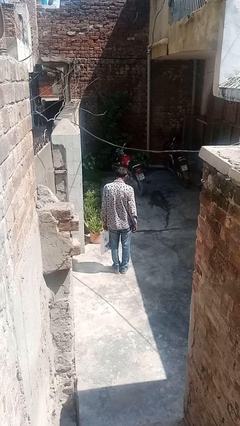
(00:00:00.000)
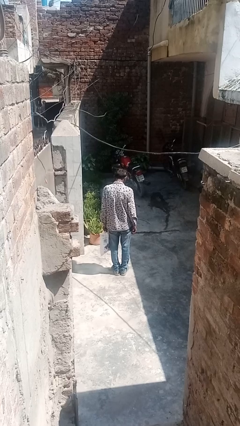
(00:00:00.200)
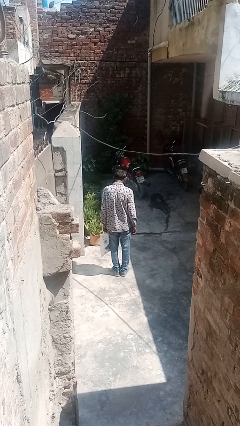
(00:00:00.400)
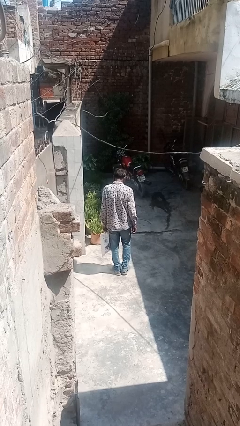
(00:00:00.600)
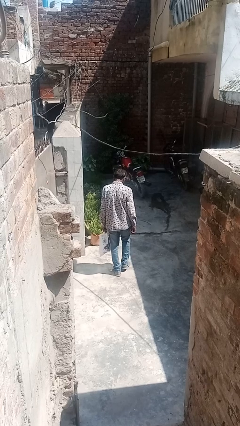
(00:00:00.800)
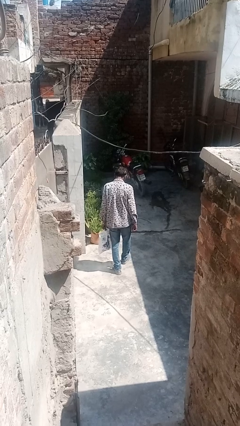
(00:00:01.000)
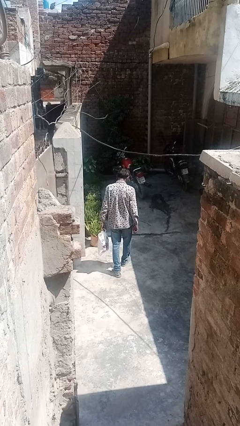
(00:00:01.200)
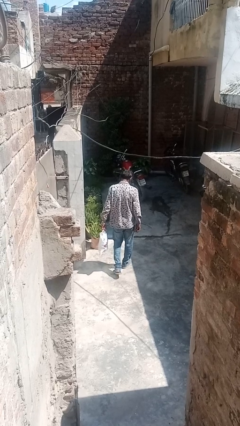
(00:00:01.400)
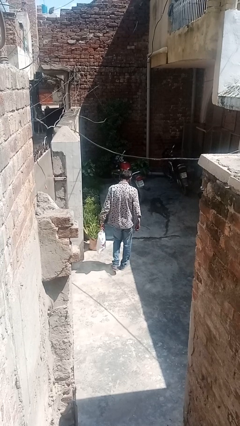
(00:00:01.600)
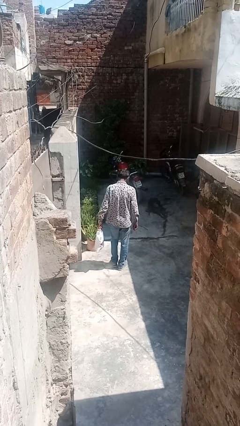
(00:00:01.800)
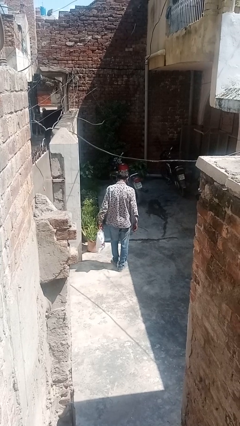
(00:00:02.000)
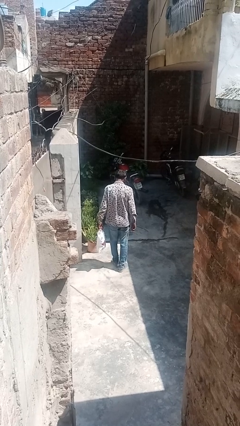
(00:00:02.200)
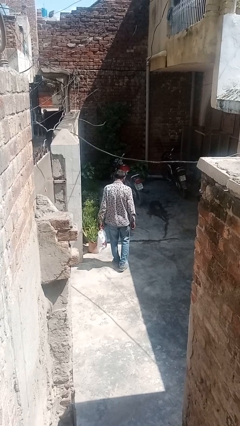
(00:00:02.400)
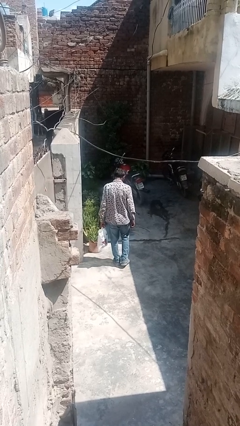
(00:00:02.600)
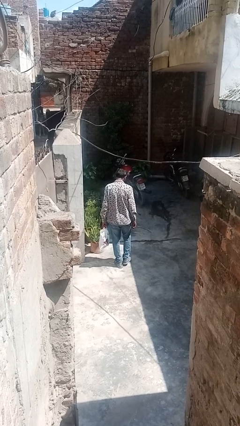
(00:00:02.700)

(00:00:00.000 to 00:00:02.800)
person carries groceries

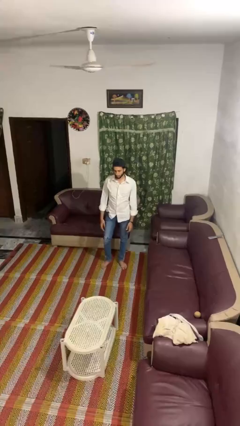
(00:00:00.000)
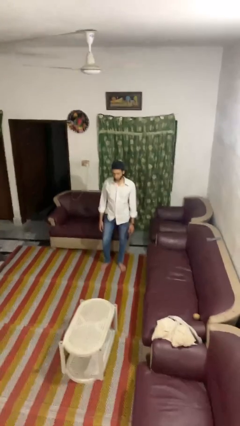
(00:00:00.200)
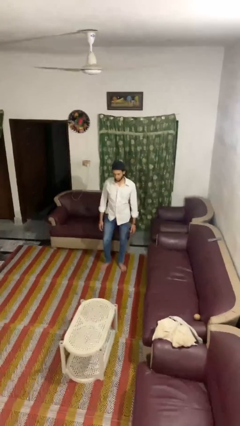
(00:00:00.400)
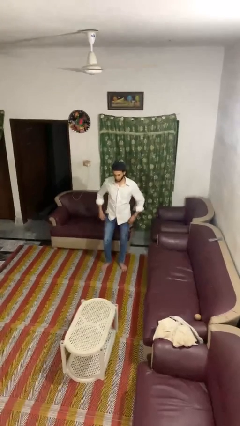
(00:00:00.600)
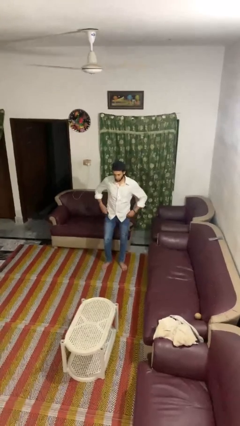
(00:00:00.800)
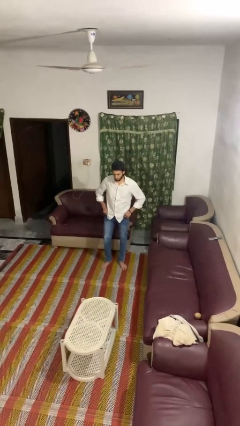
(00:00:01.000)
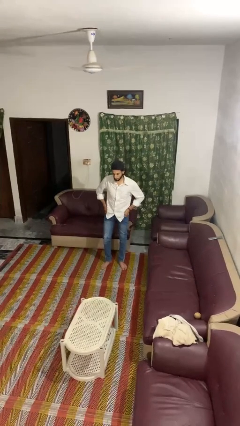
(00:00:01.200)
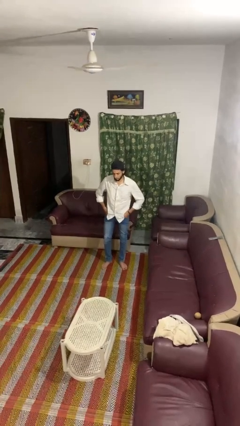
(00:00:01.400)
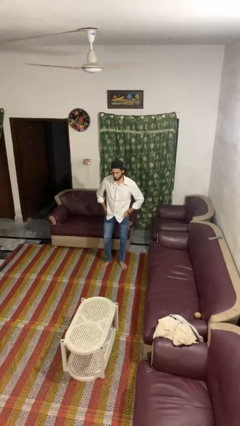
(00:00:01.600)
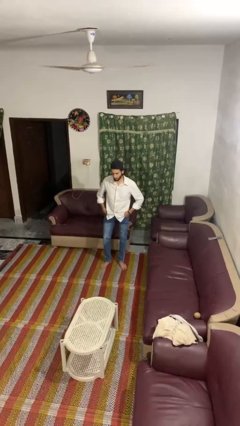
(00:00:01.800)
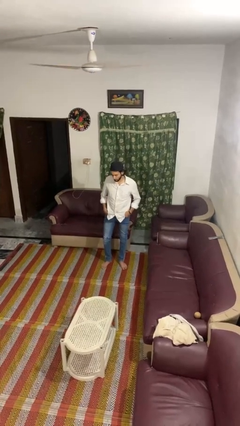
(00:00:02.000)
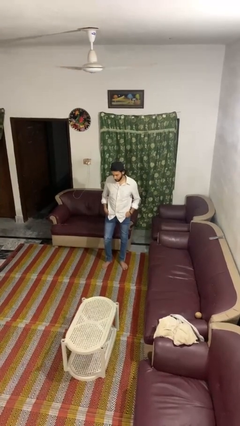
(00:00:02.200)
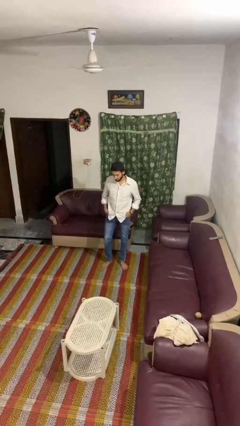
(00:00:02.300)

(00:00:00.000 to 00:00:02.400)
person puts hands in back pockets

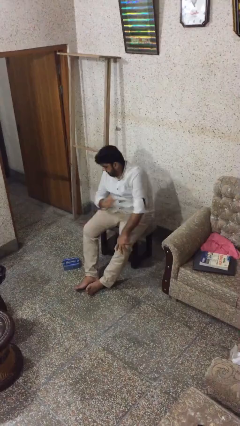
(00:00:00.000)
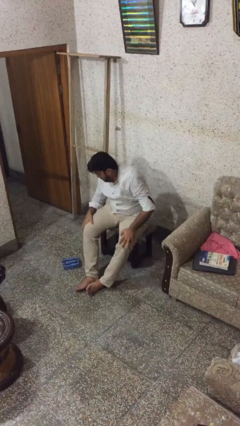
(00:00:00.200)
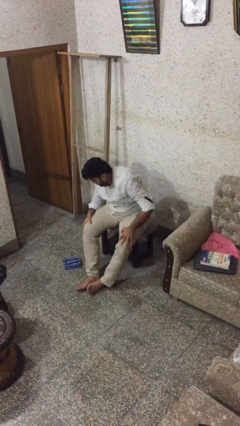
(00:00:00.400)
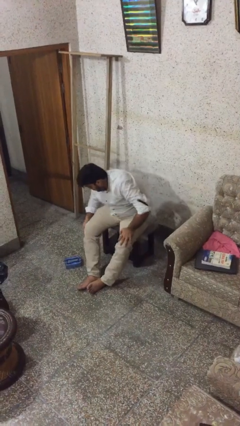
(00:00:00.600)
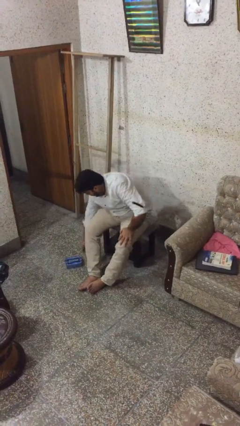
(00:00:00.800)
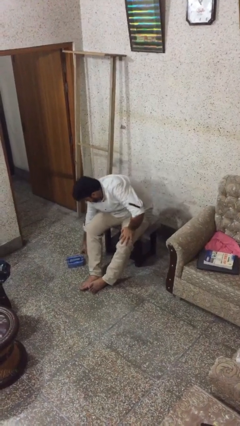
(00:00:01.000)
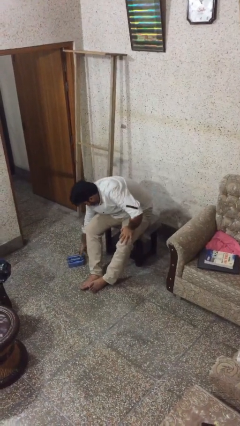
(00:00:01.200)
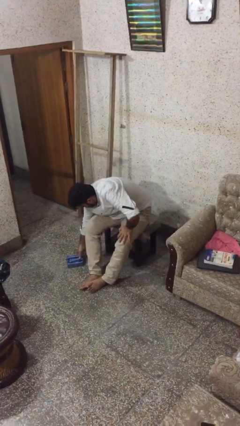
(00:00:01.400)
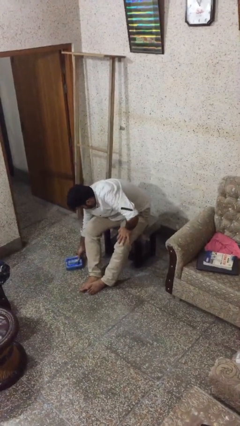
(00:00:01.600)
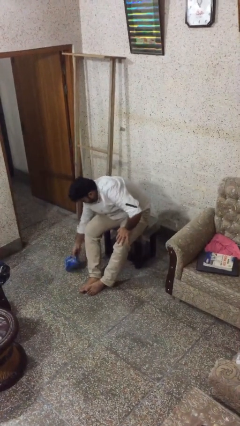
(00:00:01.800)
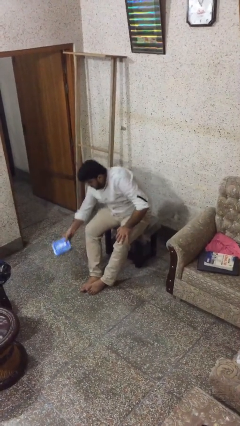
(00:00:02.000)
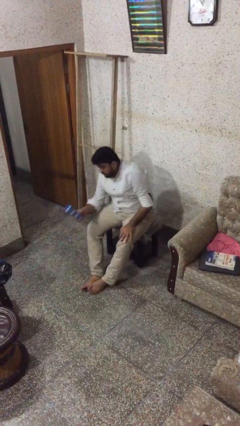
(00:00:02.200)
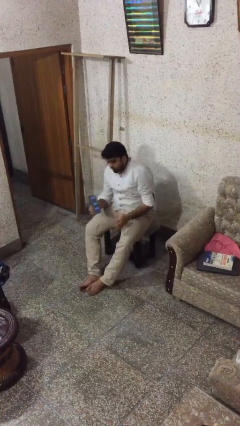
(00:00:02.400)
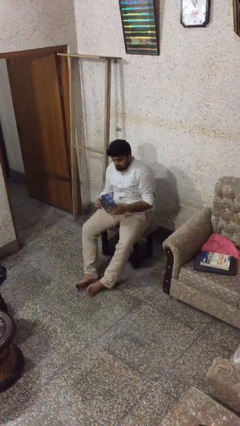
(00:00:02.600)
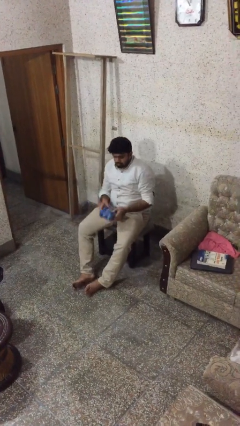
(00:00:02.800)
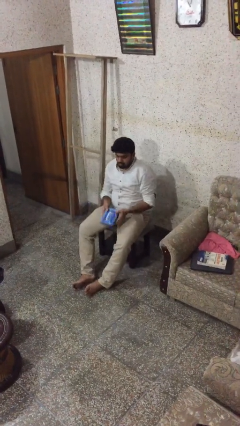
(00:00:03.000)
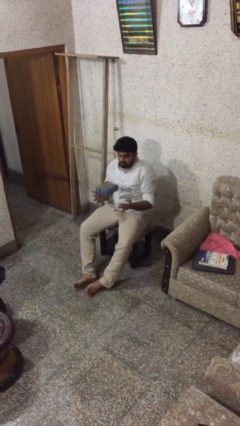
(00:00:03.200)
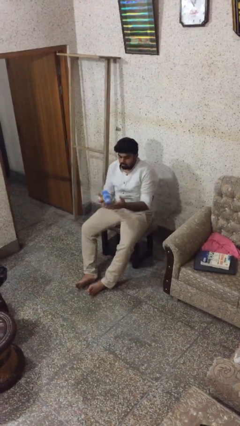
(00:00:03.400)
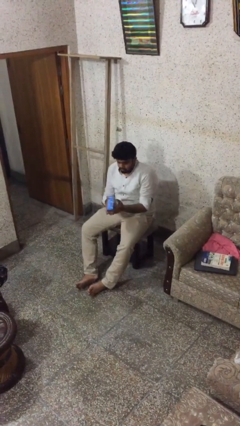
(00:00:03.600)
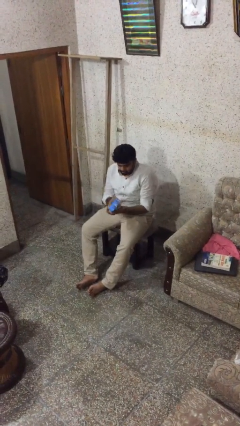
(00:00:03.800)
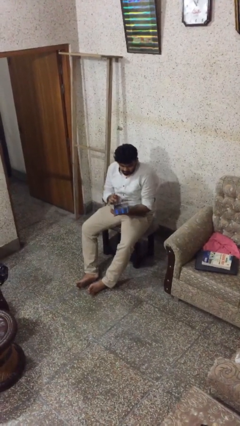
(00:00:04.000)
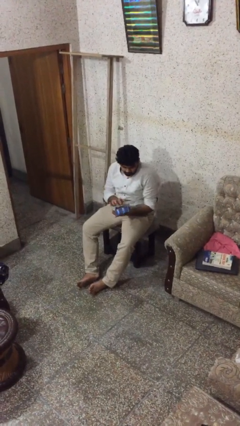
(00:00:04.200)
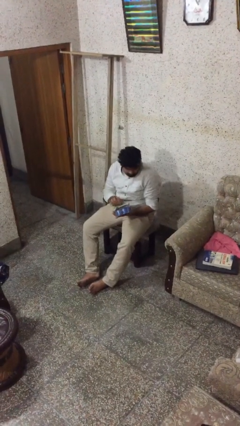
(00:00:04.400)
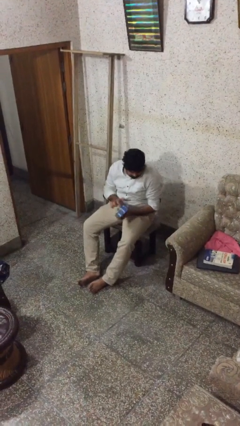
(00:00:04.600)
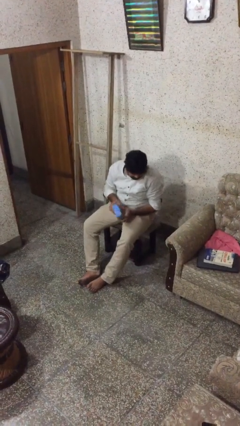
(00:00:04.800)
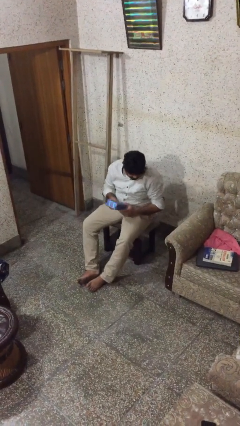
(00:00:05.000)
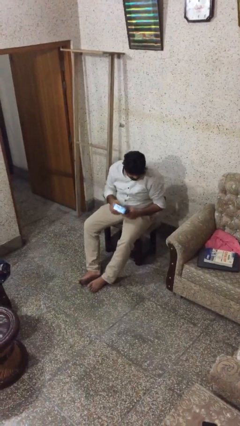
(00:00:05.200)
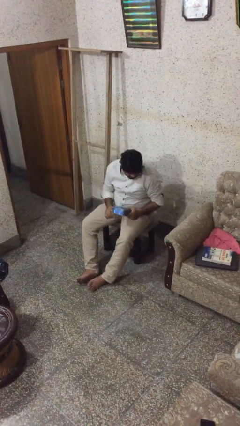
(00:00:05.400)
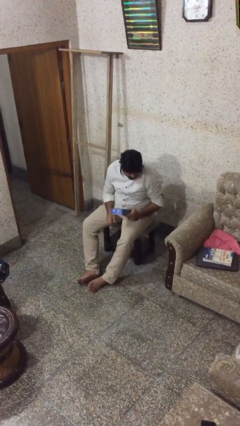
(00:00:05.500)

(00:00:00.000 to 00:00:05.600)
person picks up object from floor

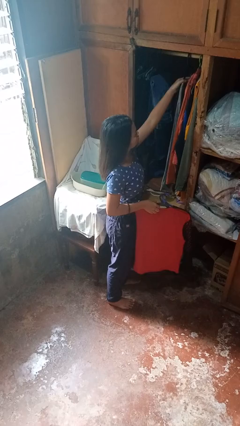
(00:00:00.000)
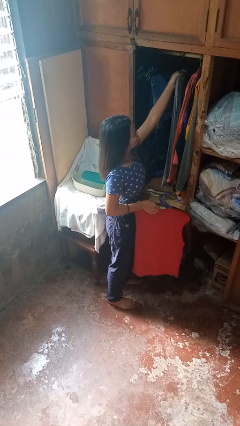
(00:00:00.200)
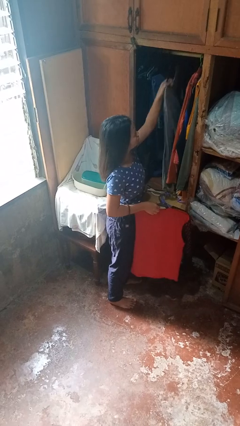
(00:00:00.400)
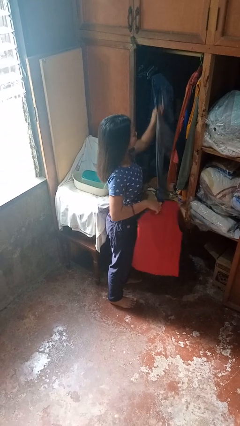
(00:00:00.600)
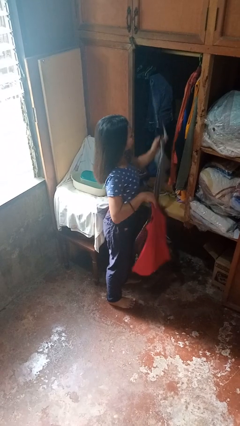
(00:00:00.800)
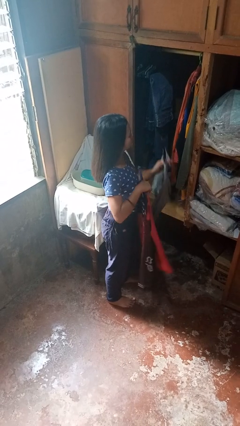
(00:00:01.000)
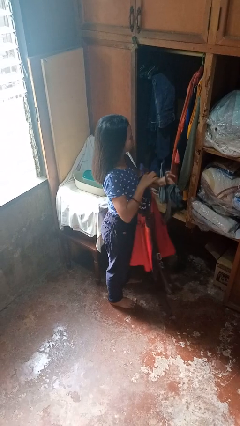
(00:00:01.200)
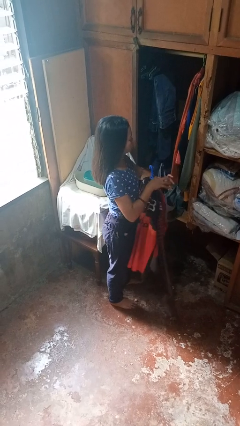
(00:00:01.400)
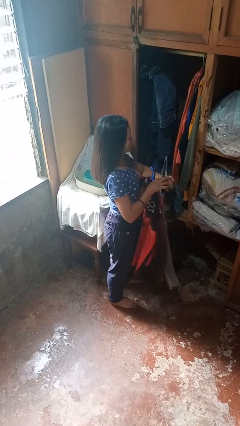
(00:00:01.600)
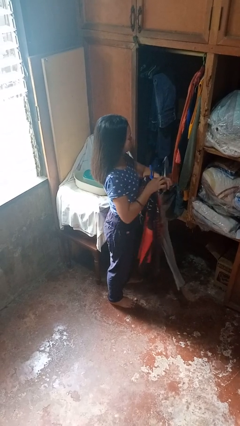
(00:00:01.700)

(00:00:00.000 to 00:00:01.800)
person takes clothes from closet

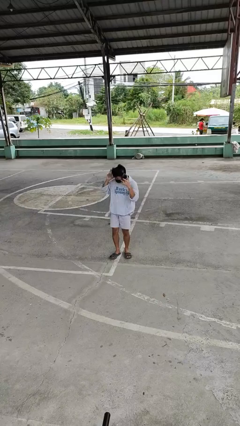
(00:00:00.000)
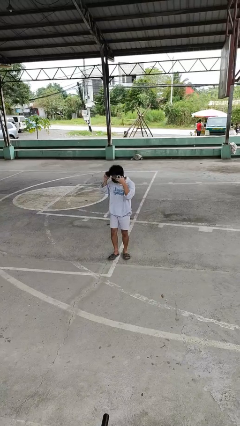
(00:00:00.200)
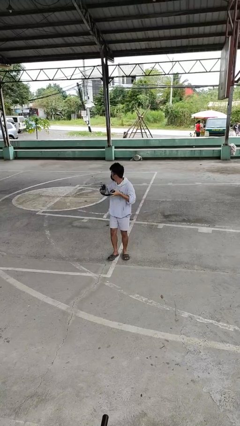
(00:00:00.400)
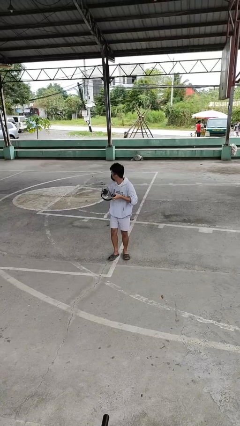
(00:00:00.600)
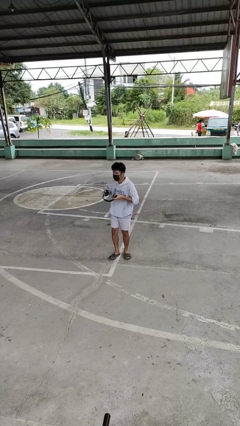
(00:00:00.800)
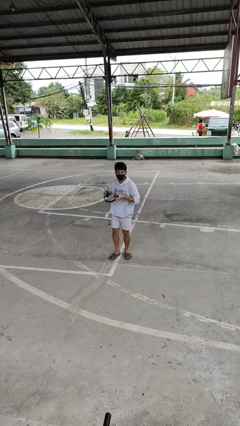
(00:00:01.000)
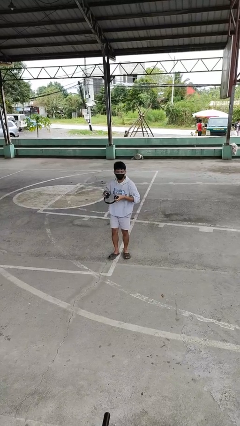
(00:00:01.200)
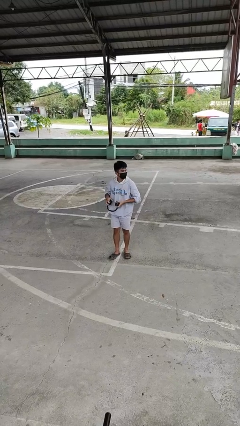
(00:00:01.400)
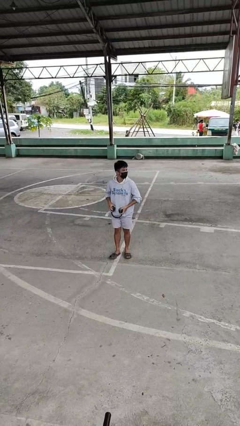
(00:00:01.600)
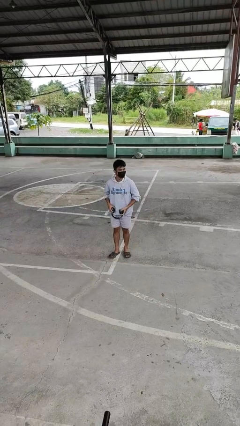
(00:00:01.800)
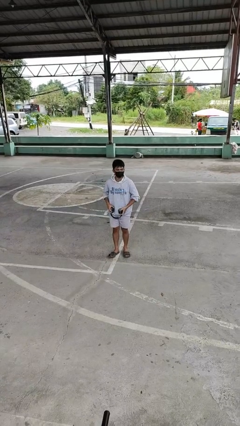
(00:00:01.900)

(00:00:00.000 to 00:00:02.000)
person takes off headphones

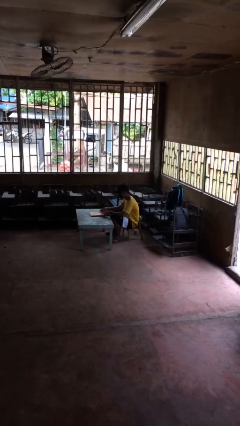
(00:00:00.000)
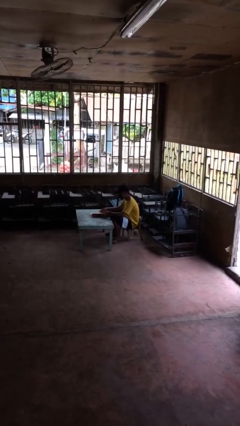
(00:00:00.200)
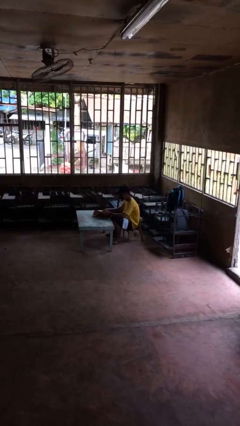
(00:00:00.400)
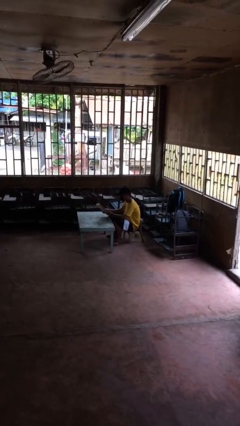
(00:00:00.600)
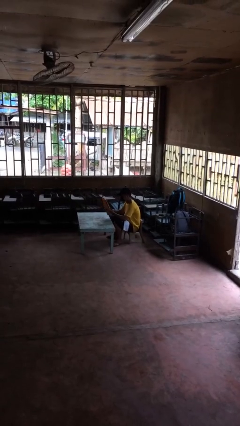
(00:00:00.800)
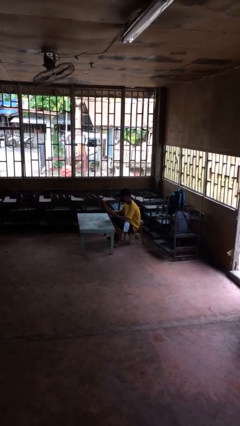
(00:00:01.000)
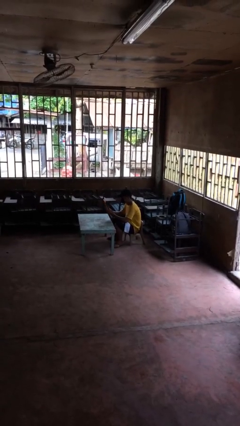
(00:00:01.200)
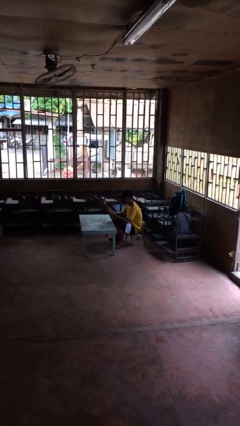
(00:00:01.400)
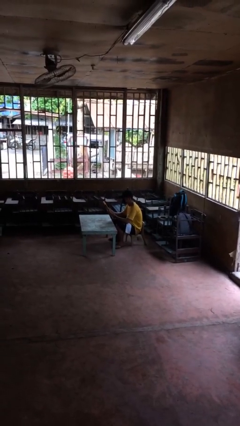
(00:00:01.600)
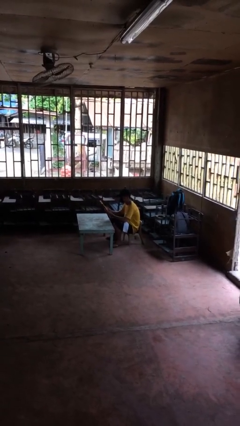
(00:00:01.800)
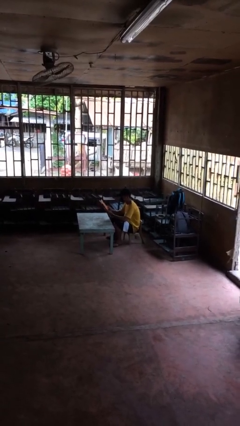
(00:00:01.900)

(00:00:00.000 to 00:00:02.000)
person picks up object from table

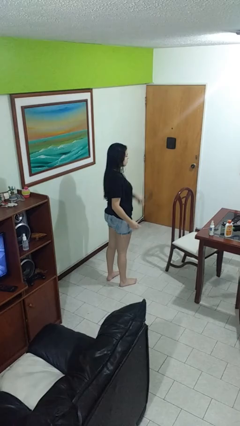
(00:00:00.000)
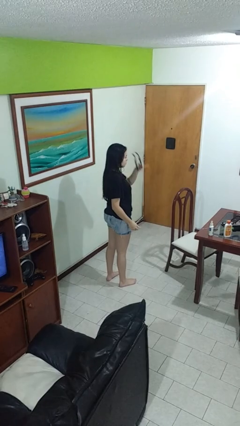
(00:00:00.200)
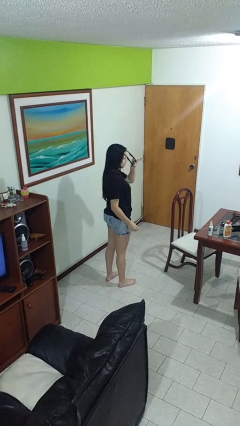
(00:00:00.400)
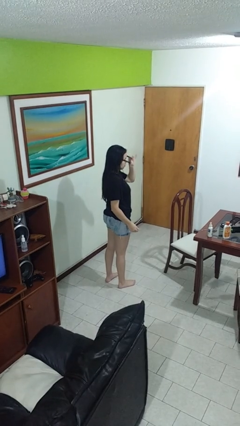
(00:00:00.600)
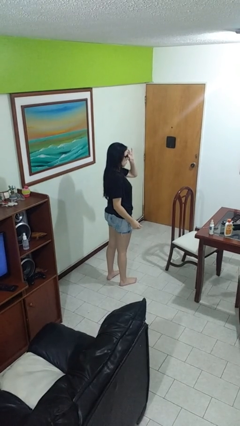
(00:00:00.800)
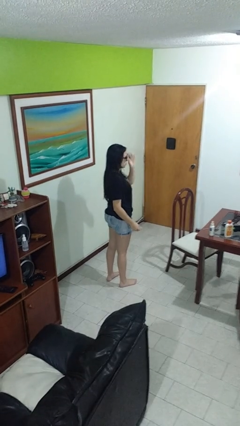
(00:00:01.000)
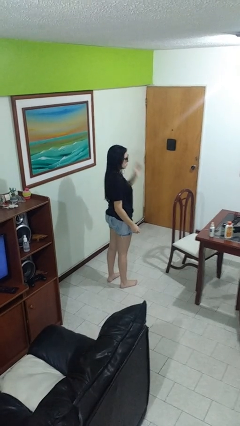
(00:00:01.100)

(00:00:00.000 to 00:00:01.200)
person puts on sunglasses
